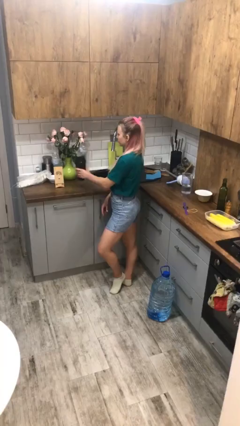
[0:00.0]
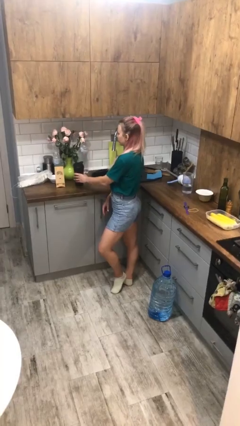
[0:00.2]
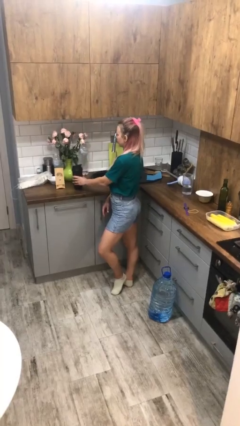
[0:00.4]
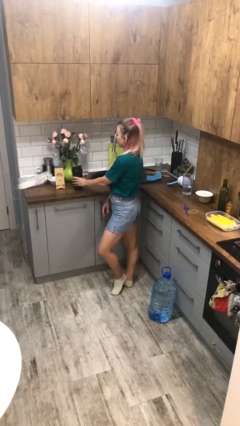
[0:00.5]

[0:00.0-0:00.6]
person puts down object on countertop

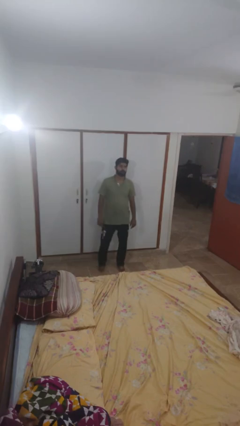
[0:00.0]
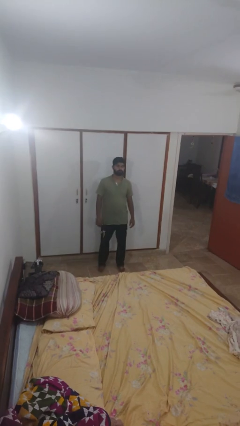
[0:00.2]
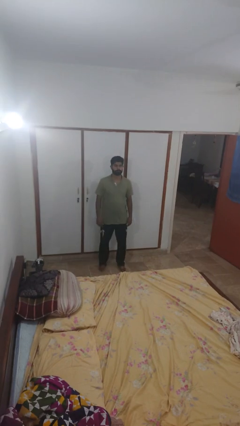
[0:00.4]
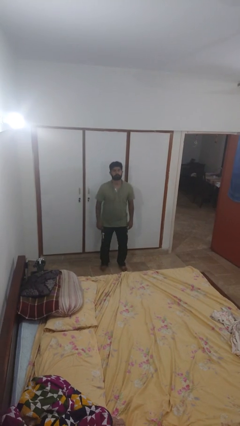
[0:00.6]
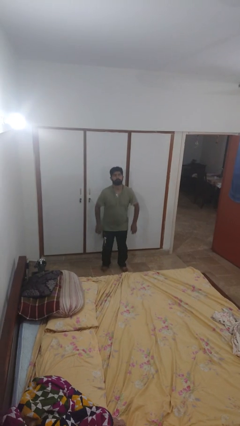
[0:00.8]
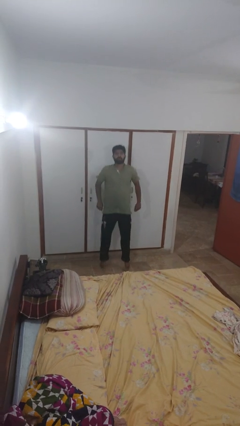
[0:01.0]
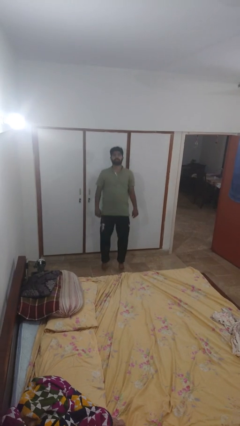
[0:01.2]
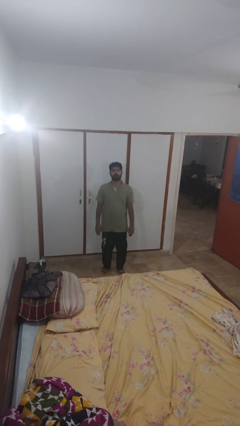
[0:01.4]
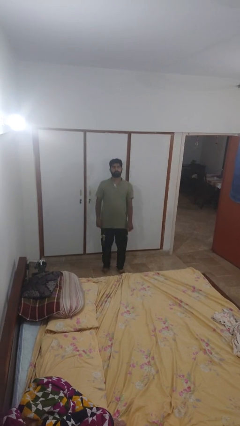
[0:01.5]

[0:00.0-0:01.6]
person jumps

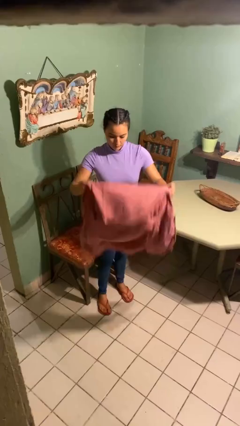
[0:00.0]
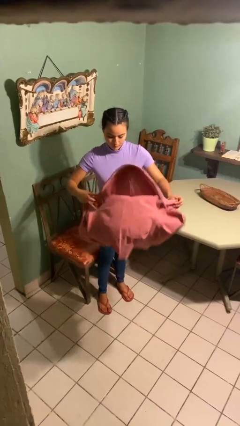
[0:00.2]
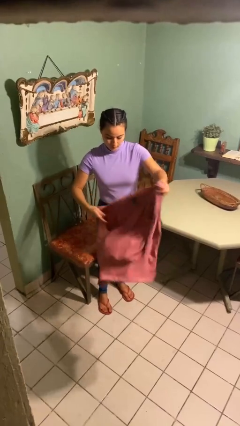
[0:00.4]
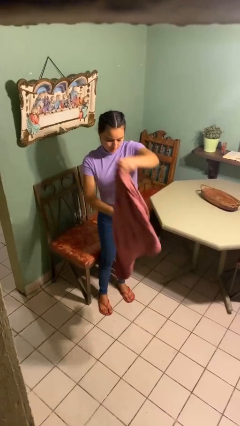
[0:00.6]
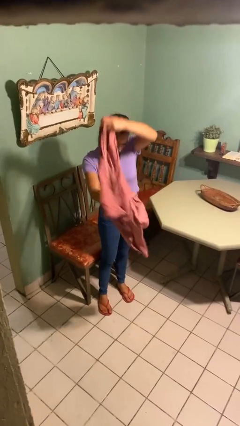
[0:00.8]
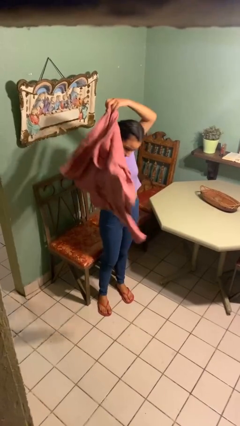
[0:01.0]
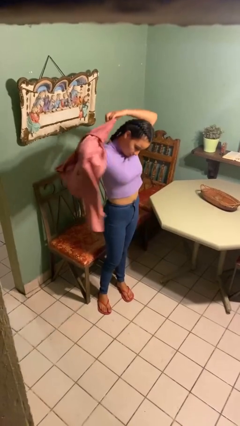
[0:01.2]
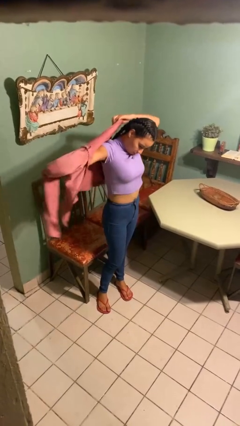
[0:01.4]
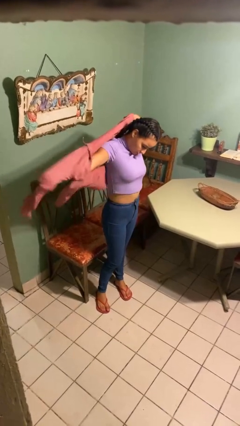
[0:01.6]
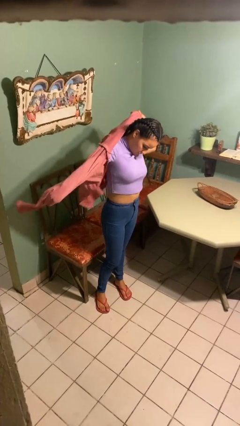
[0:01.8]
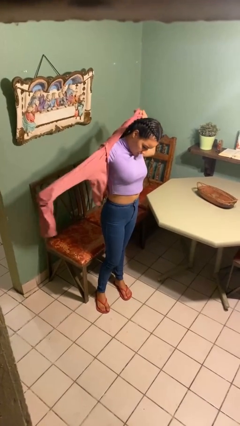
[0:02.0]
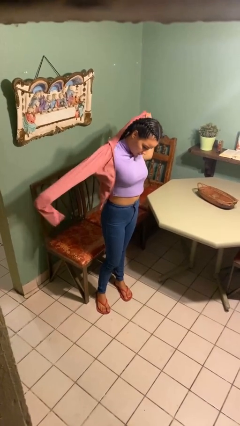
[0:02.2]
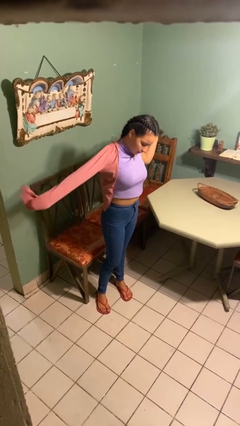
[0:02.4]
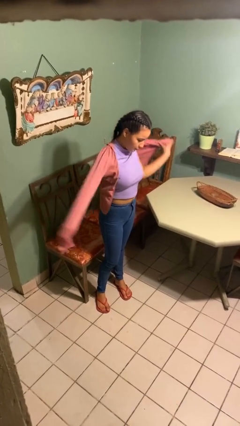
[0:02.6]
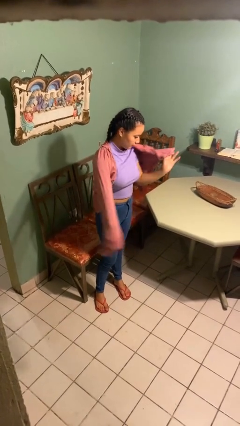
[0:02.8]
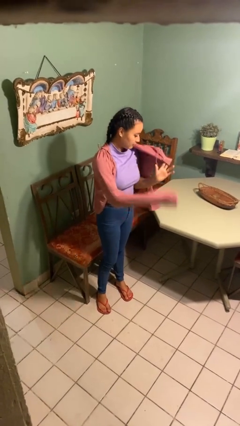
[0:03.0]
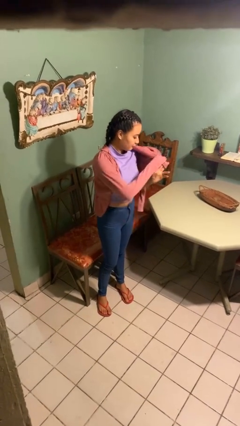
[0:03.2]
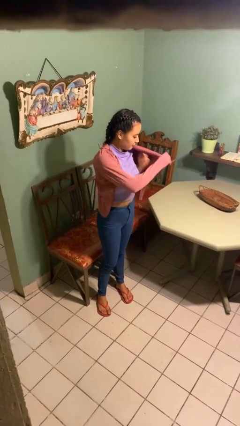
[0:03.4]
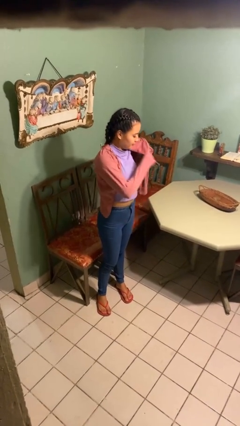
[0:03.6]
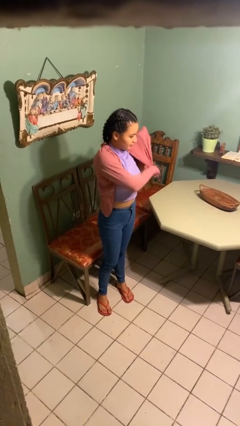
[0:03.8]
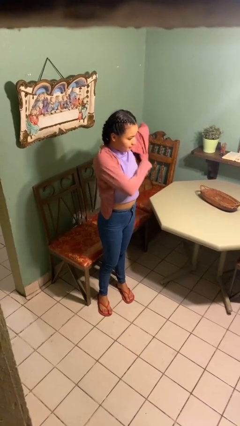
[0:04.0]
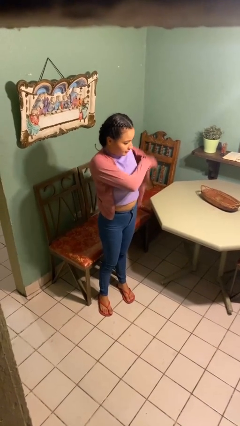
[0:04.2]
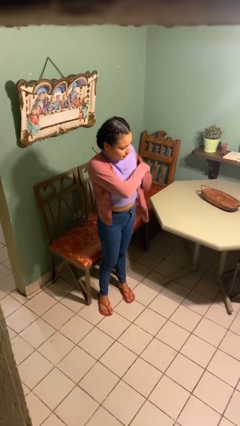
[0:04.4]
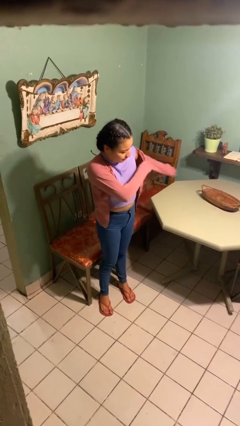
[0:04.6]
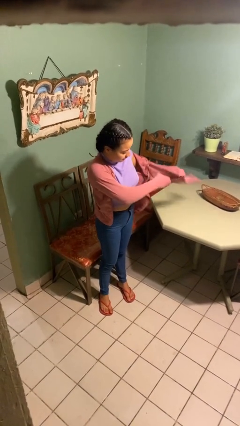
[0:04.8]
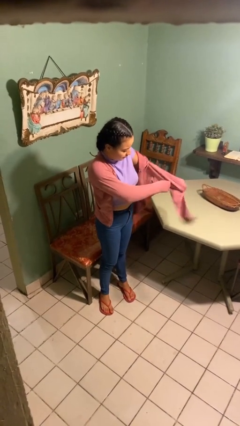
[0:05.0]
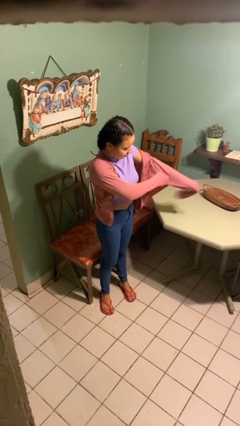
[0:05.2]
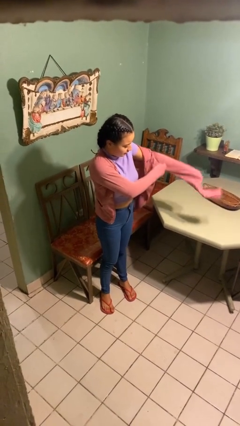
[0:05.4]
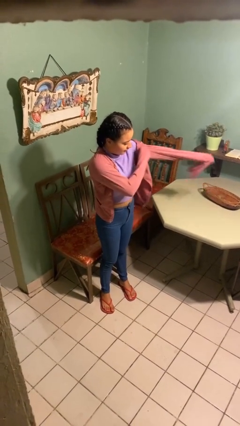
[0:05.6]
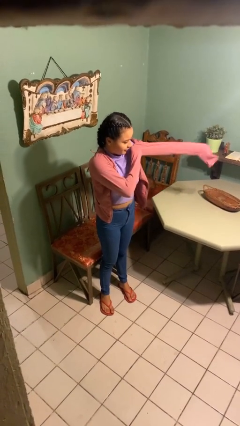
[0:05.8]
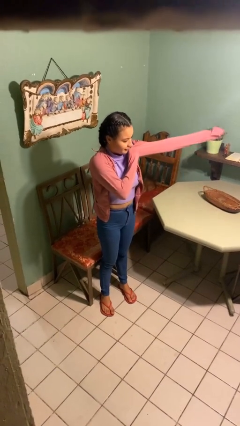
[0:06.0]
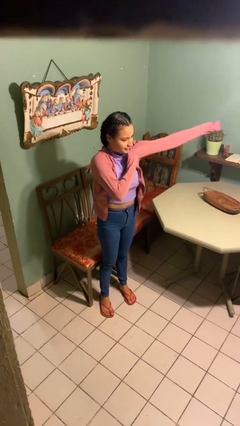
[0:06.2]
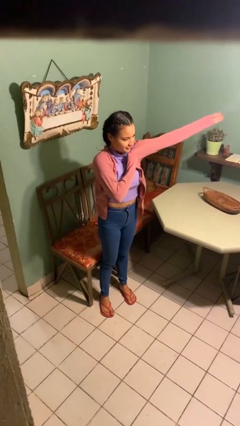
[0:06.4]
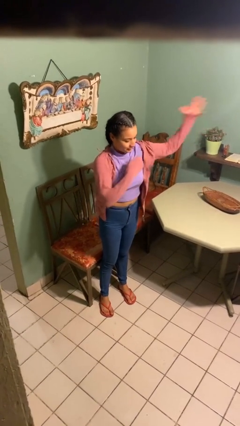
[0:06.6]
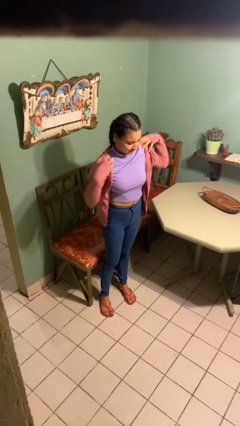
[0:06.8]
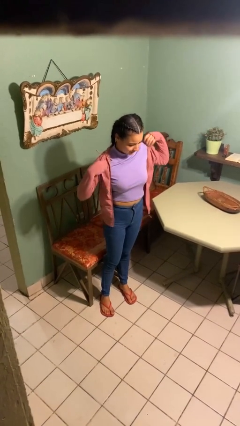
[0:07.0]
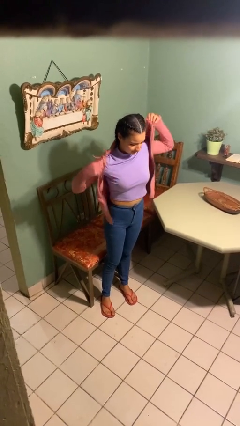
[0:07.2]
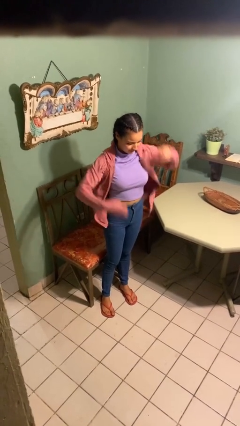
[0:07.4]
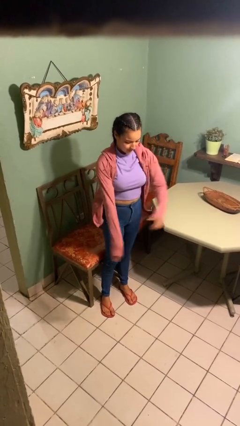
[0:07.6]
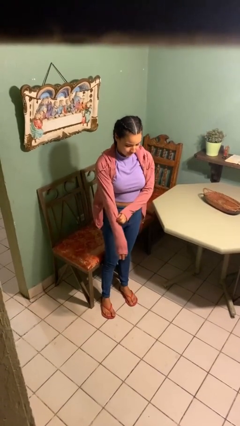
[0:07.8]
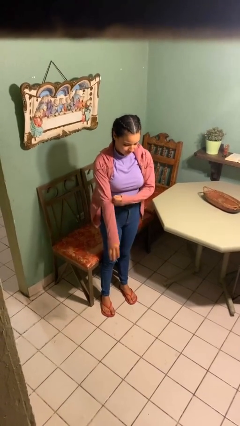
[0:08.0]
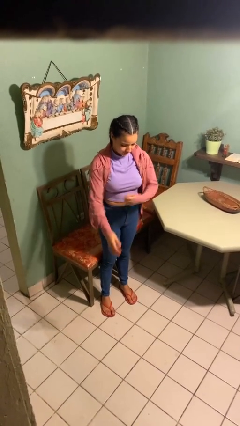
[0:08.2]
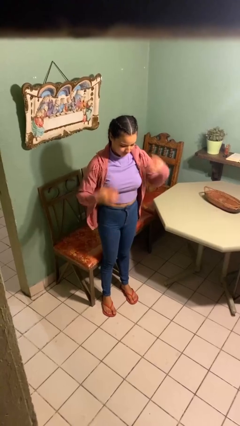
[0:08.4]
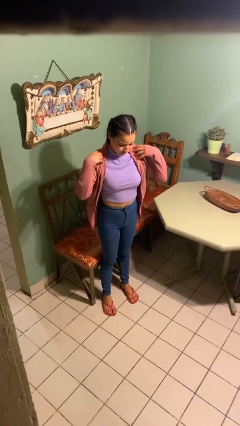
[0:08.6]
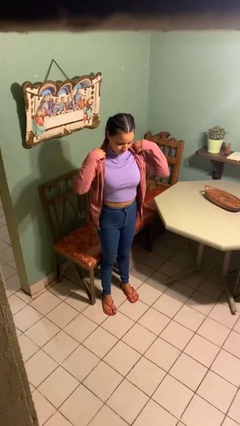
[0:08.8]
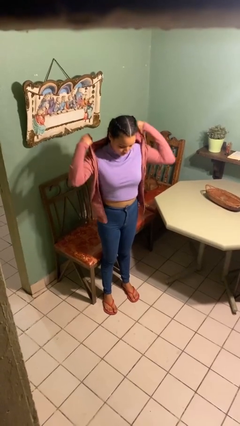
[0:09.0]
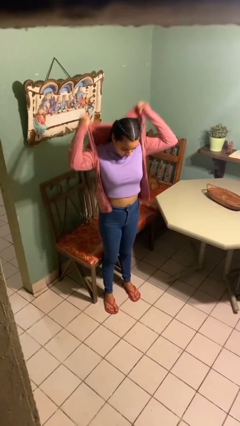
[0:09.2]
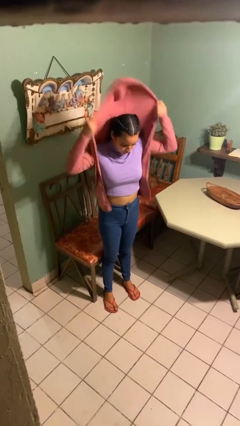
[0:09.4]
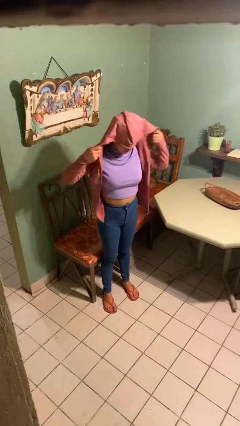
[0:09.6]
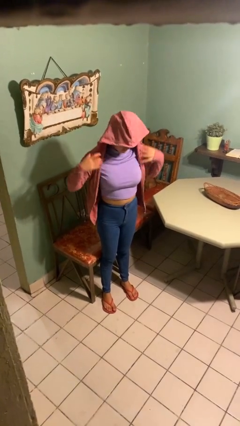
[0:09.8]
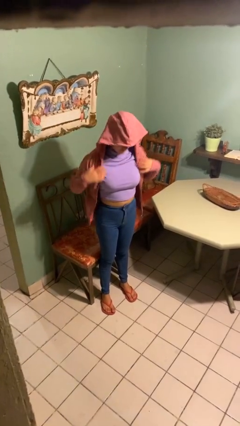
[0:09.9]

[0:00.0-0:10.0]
person puts on hoodie

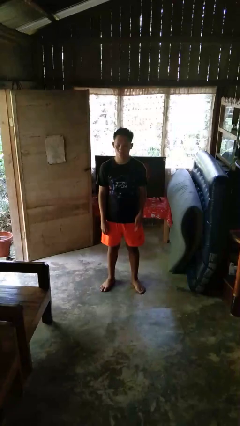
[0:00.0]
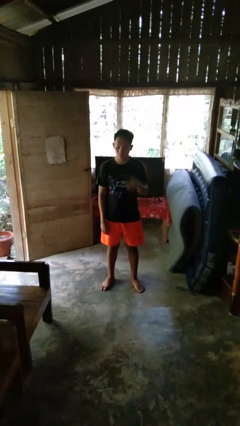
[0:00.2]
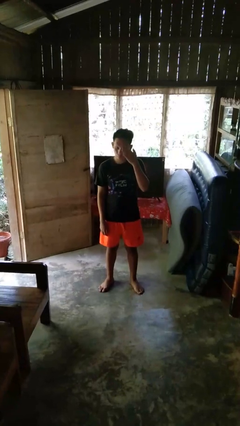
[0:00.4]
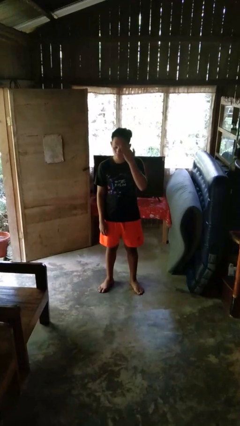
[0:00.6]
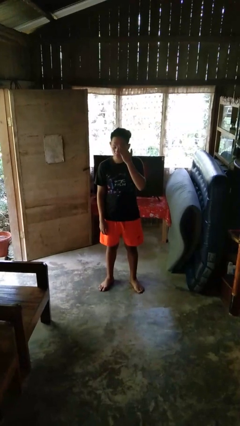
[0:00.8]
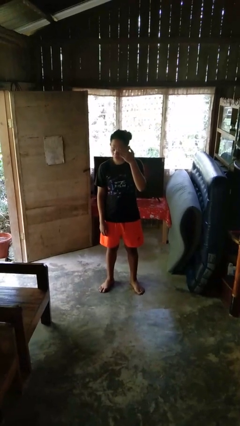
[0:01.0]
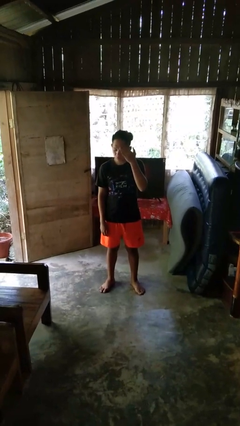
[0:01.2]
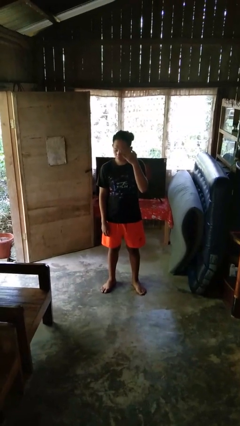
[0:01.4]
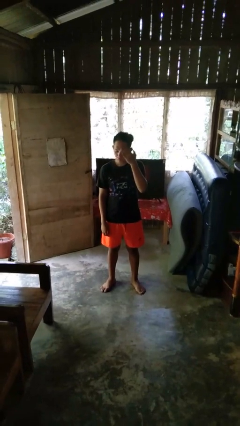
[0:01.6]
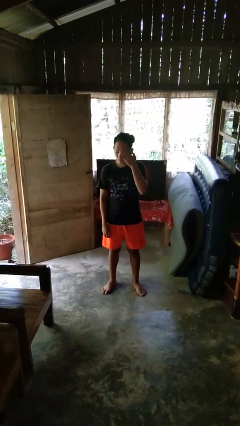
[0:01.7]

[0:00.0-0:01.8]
person rubs eyes

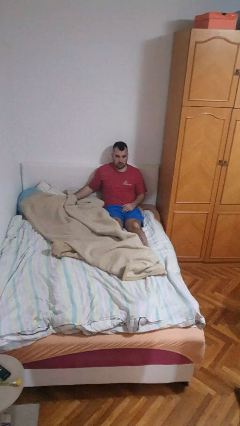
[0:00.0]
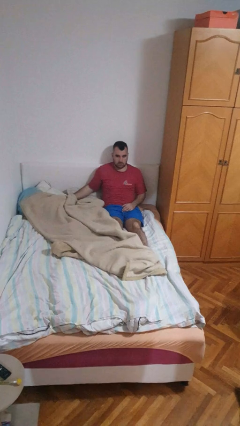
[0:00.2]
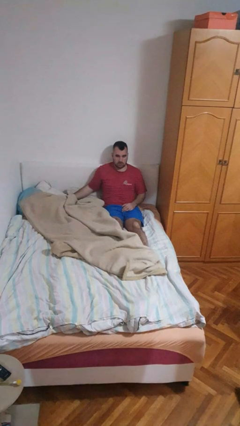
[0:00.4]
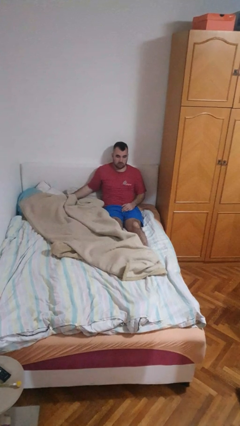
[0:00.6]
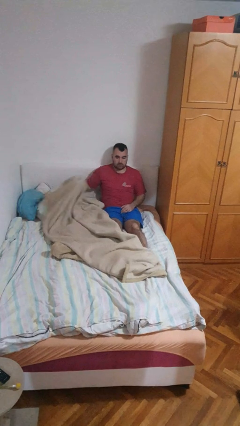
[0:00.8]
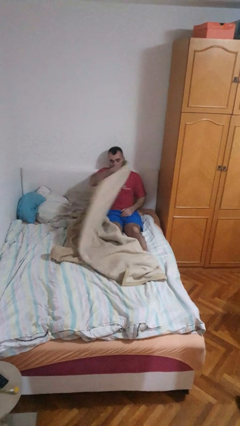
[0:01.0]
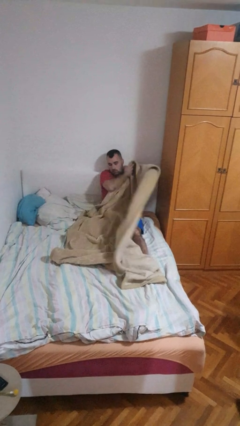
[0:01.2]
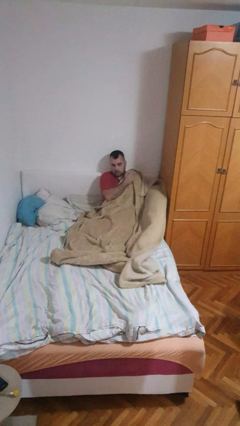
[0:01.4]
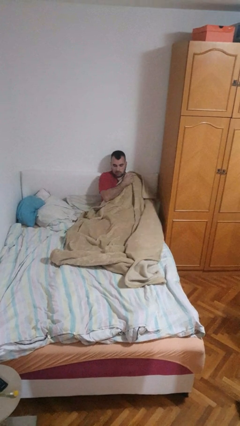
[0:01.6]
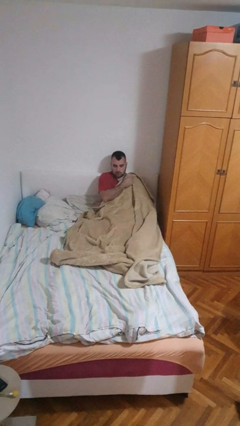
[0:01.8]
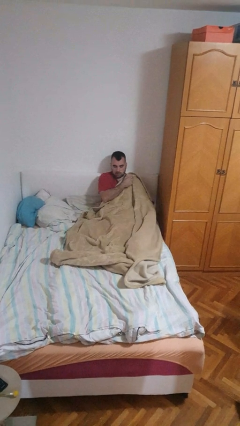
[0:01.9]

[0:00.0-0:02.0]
person covers with blanket

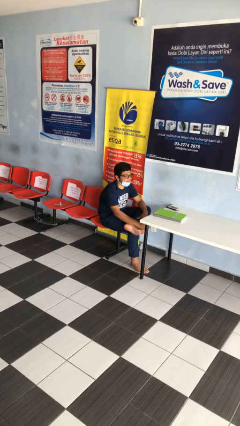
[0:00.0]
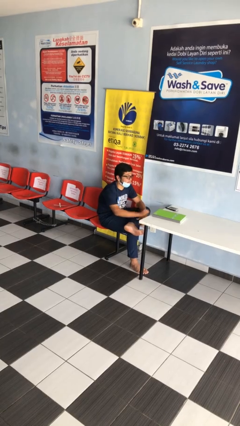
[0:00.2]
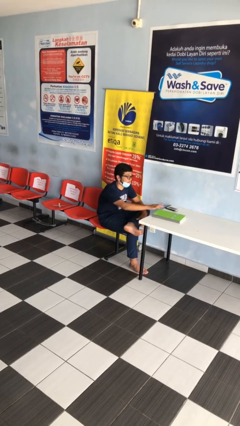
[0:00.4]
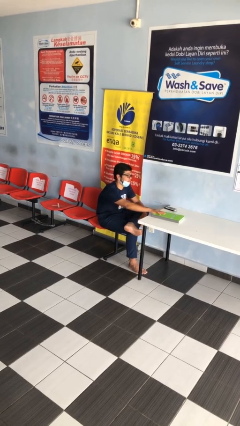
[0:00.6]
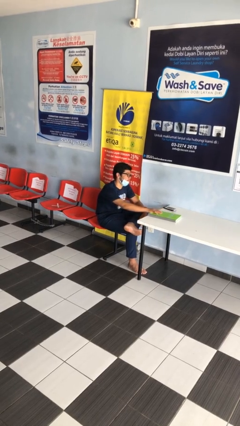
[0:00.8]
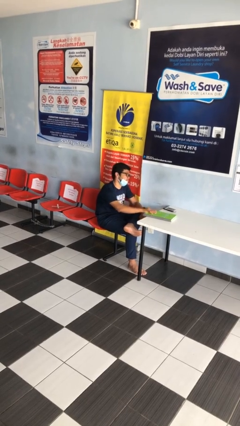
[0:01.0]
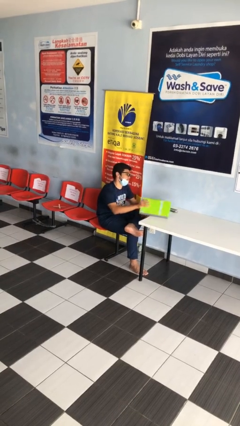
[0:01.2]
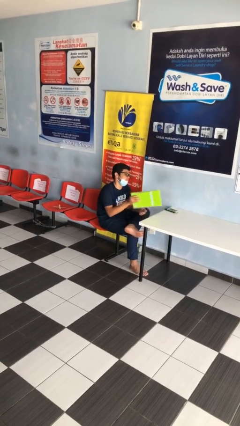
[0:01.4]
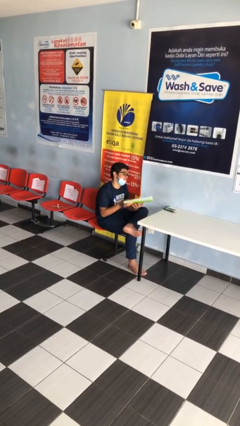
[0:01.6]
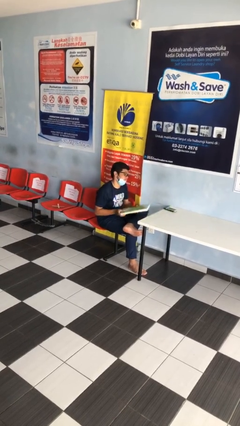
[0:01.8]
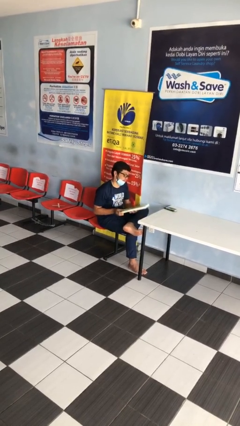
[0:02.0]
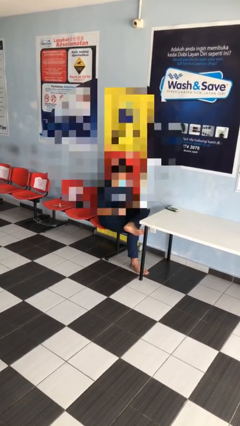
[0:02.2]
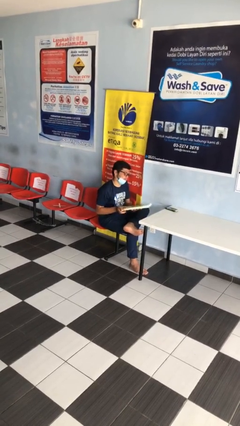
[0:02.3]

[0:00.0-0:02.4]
person picks up object from table
